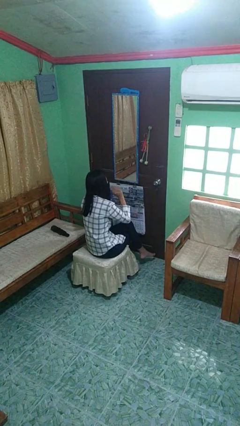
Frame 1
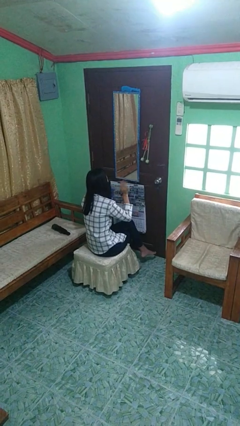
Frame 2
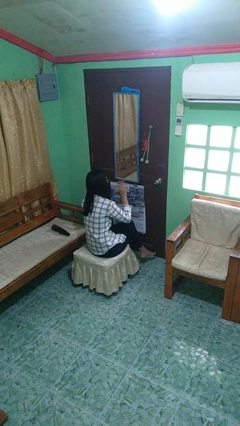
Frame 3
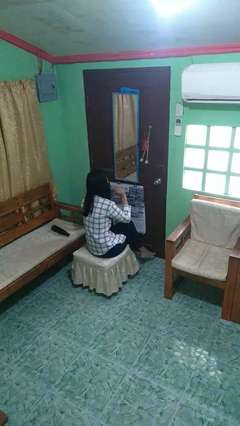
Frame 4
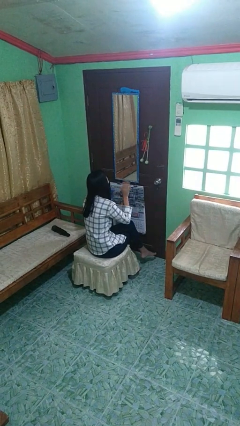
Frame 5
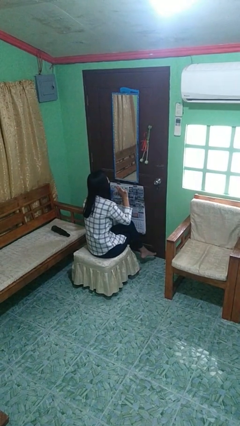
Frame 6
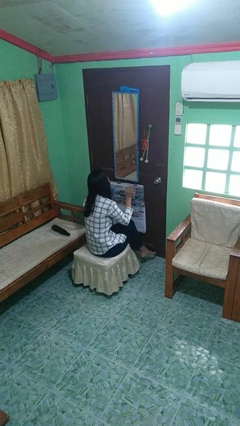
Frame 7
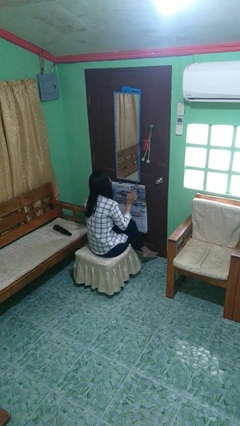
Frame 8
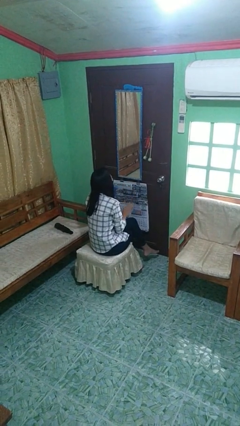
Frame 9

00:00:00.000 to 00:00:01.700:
person waves hand over object

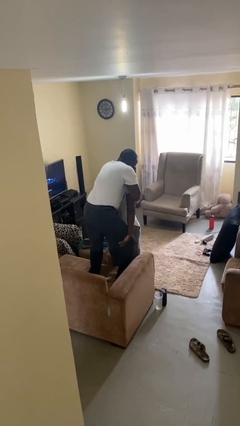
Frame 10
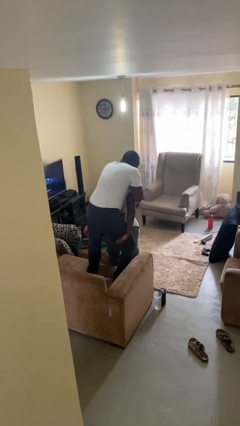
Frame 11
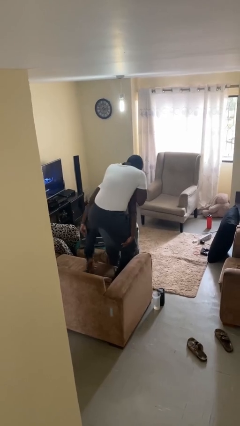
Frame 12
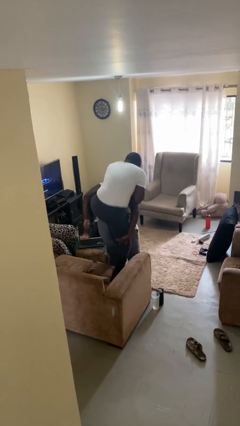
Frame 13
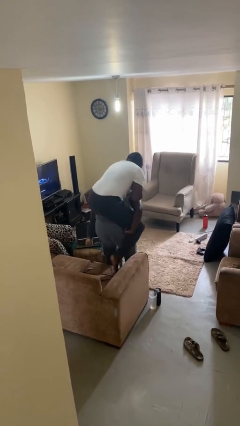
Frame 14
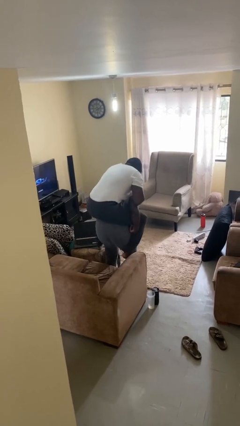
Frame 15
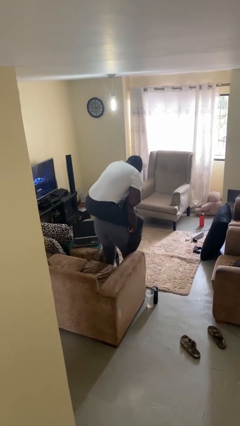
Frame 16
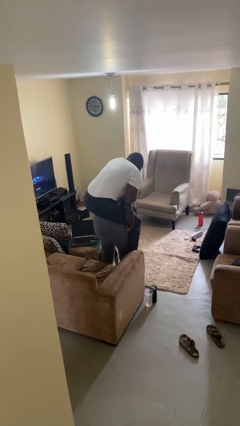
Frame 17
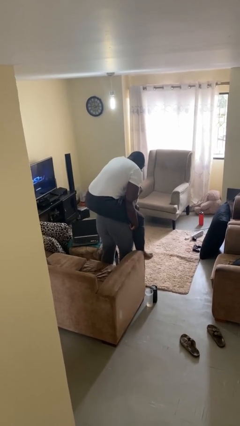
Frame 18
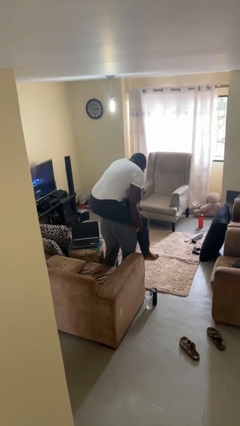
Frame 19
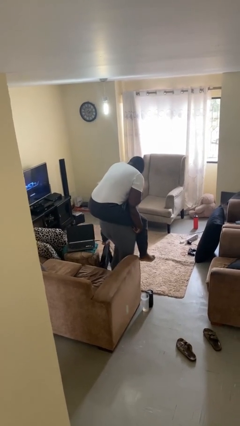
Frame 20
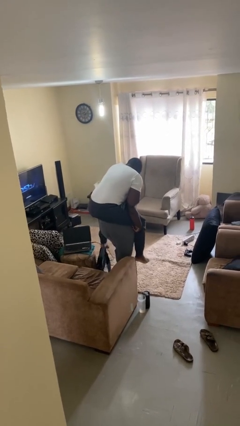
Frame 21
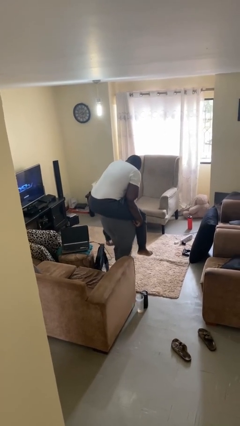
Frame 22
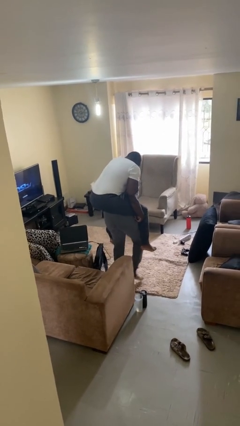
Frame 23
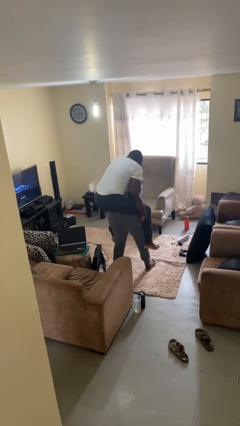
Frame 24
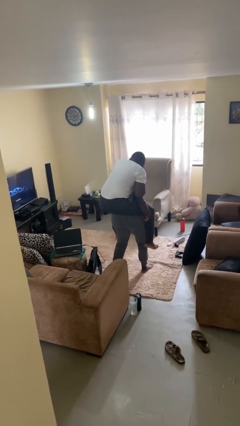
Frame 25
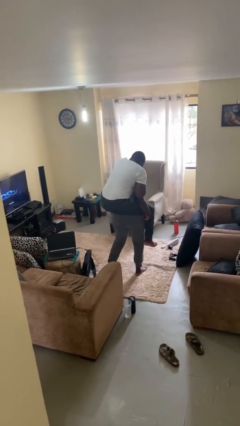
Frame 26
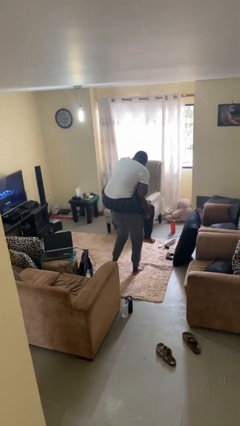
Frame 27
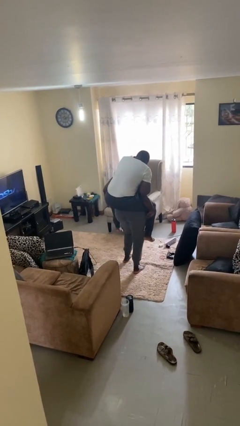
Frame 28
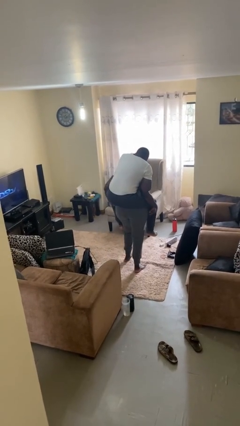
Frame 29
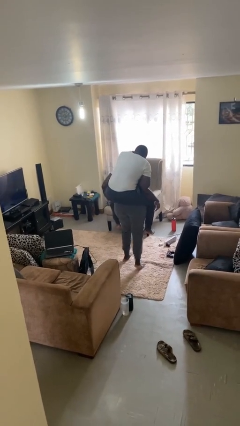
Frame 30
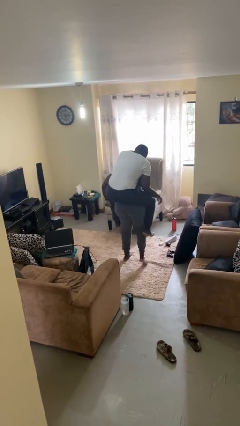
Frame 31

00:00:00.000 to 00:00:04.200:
person carries person on back

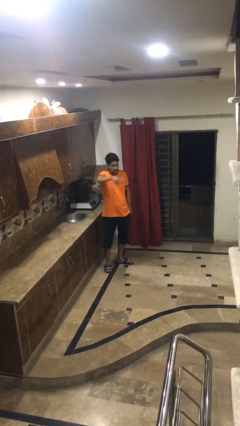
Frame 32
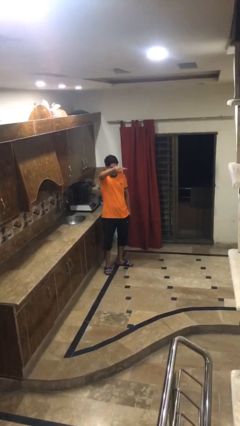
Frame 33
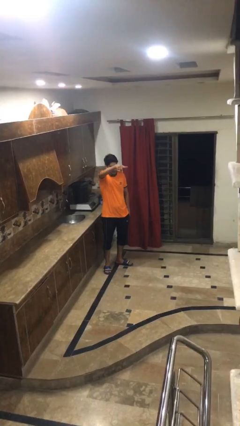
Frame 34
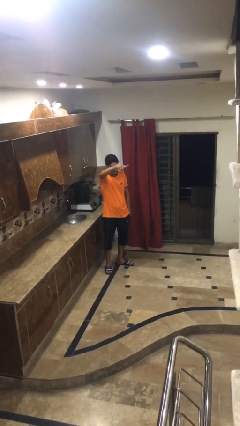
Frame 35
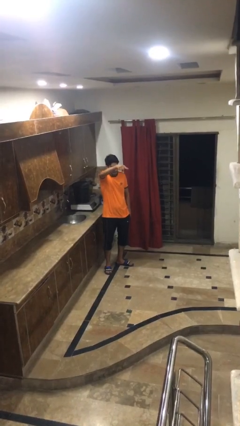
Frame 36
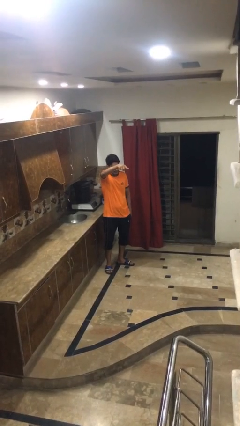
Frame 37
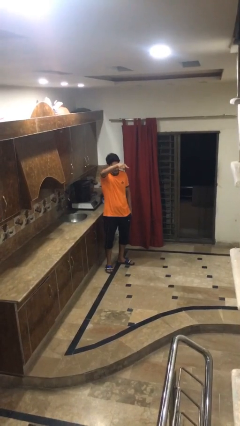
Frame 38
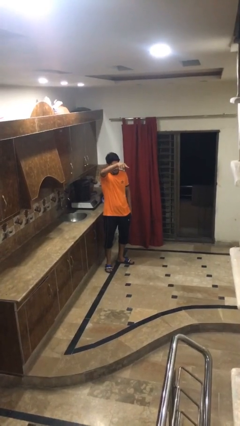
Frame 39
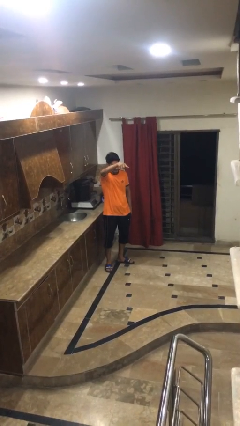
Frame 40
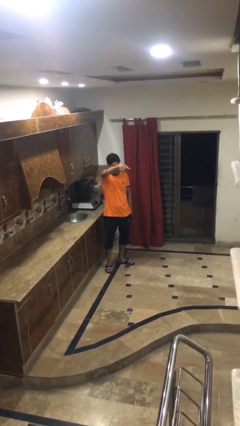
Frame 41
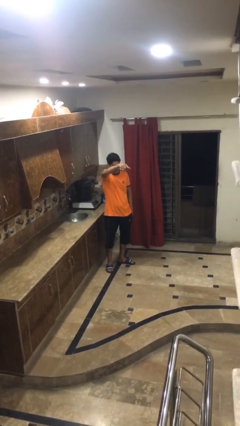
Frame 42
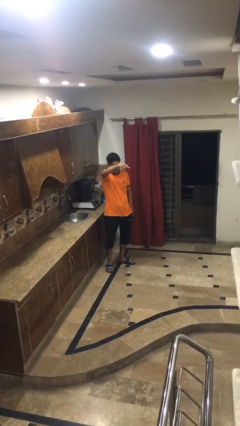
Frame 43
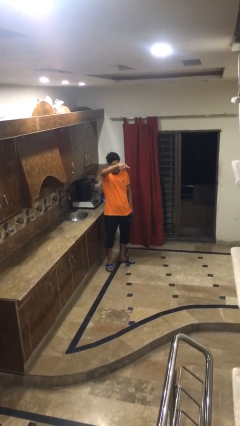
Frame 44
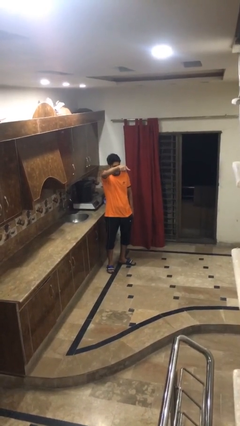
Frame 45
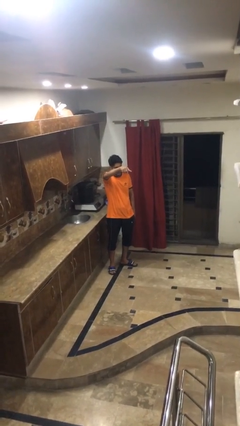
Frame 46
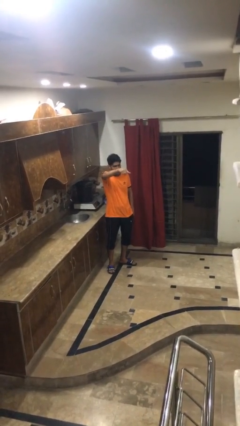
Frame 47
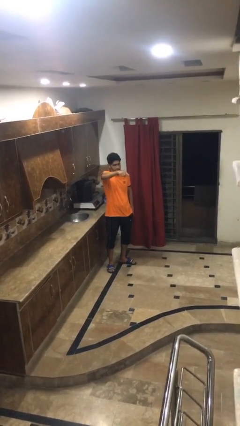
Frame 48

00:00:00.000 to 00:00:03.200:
person points at person

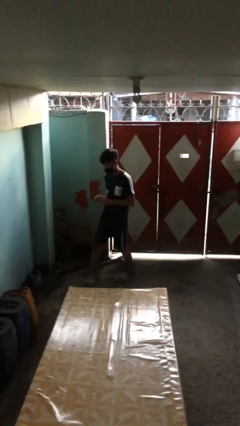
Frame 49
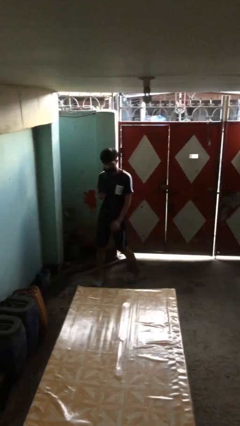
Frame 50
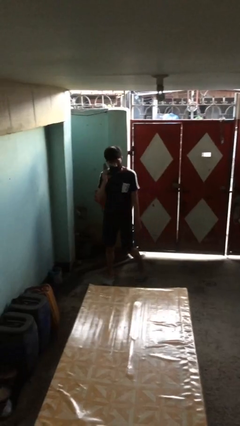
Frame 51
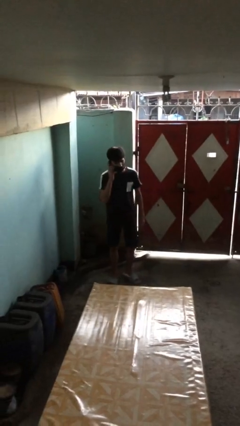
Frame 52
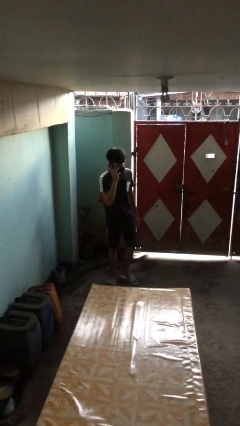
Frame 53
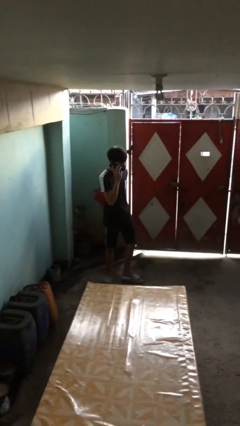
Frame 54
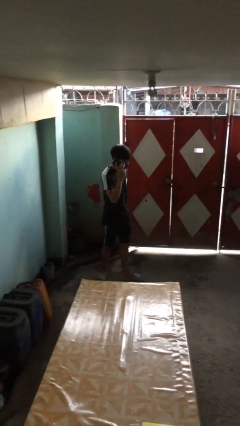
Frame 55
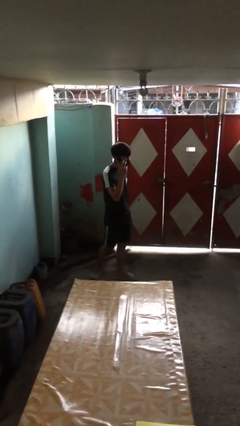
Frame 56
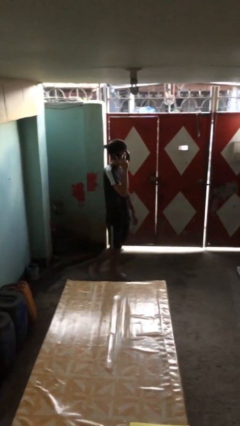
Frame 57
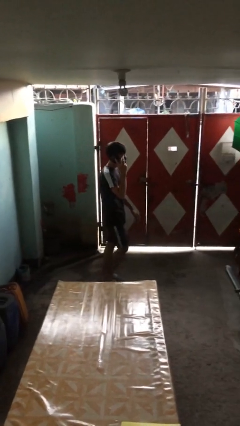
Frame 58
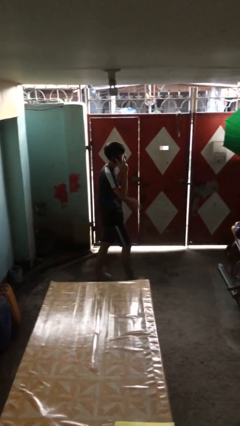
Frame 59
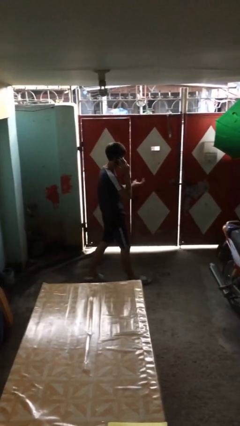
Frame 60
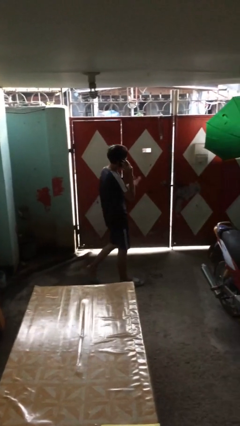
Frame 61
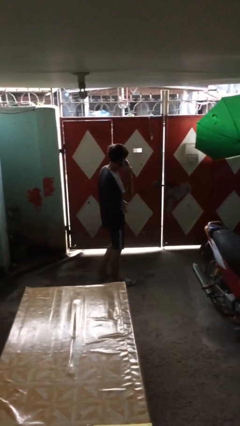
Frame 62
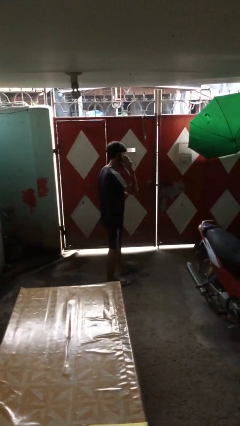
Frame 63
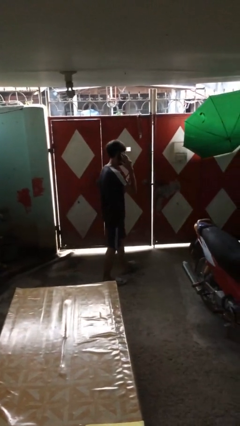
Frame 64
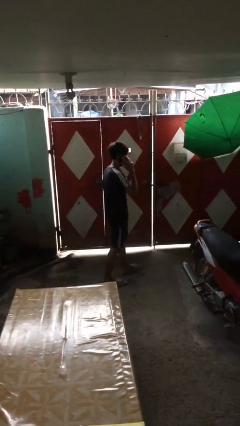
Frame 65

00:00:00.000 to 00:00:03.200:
person talks on phone

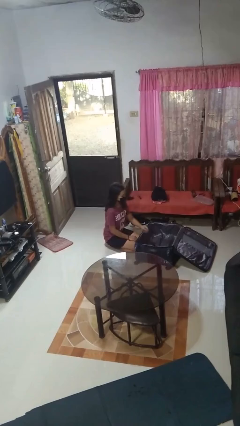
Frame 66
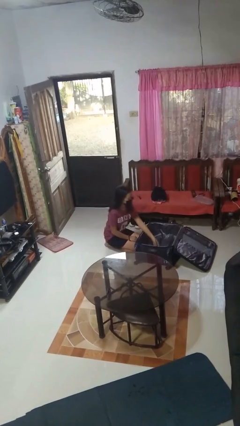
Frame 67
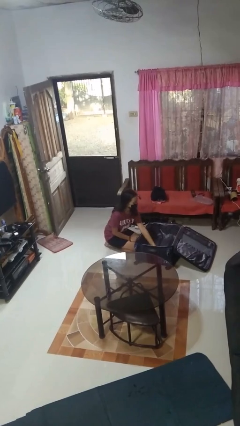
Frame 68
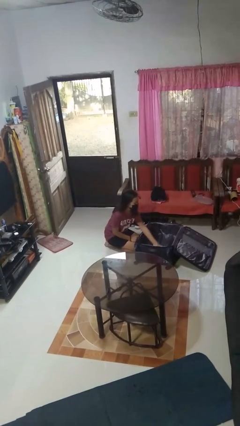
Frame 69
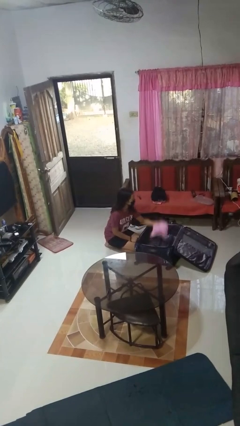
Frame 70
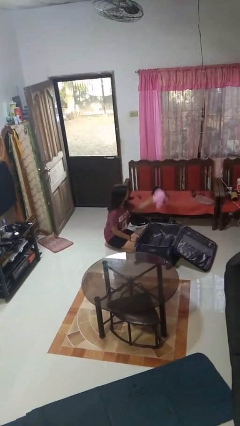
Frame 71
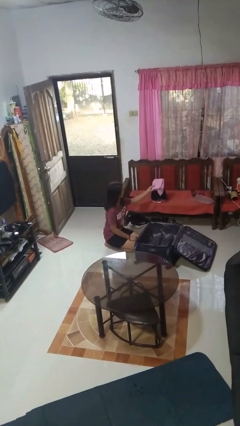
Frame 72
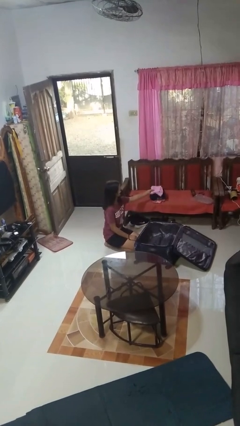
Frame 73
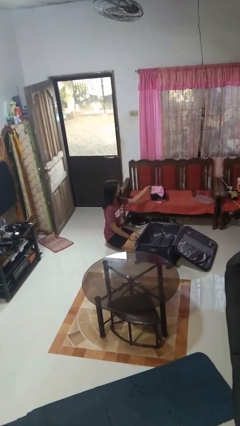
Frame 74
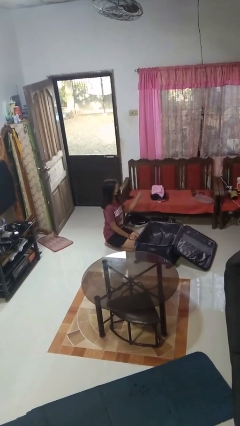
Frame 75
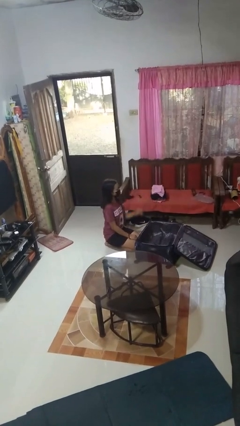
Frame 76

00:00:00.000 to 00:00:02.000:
person unloads clothes from suitcase

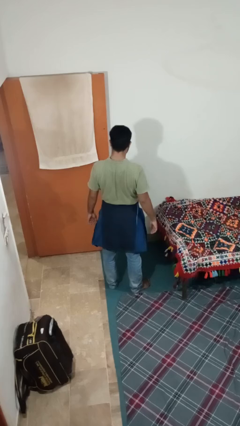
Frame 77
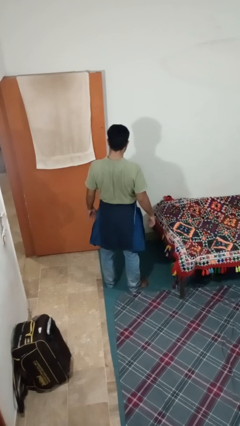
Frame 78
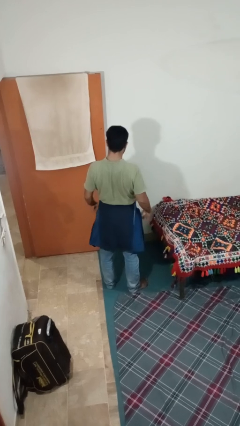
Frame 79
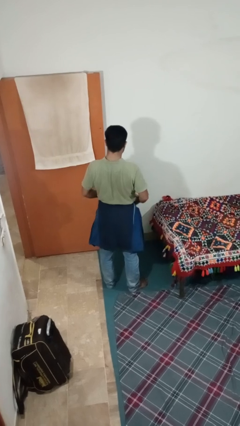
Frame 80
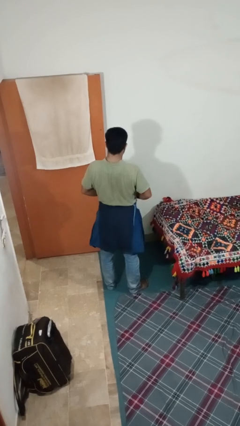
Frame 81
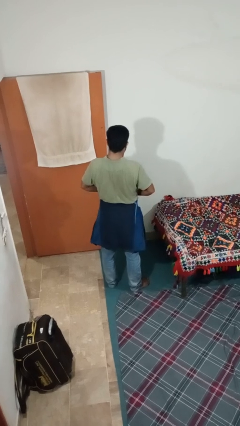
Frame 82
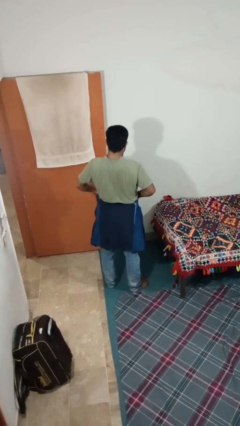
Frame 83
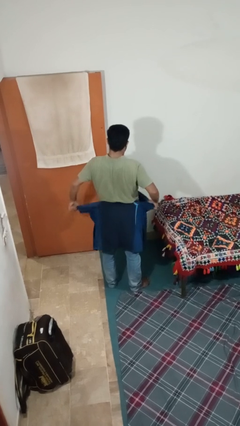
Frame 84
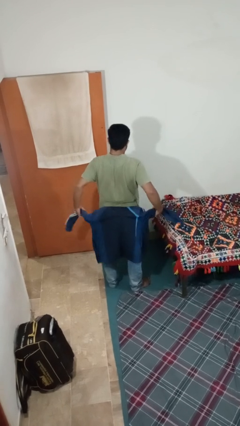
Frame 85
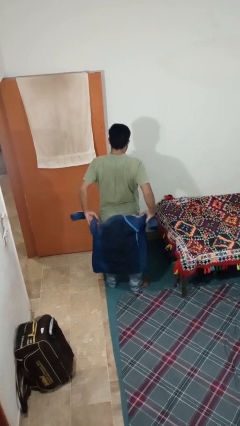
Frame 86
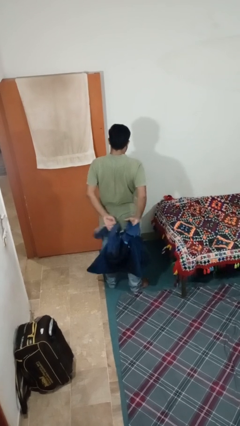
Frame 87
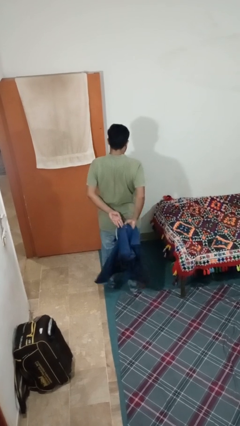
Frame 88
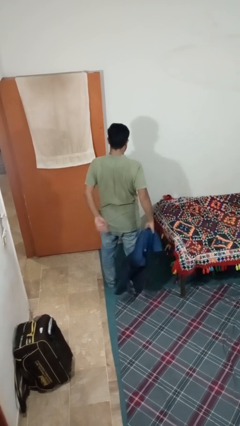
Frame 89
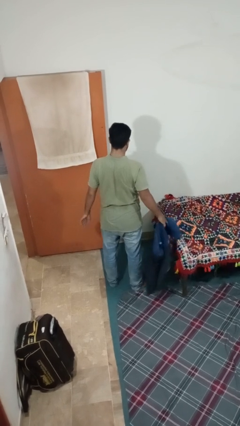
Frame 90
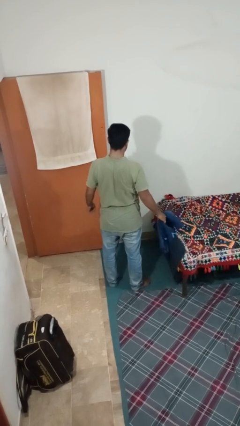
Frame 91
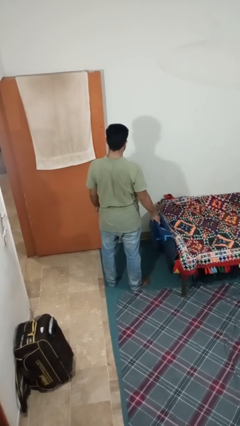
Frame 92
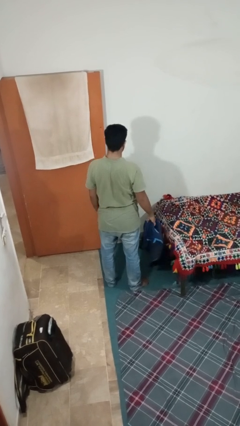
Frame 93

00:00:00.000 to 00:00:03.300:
person unties jacket around waist

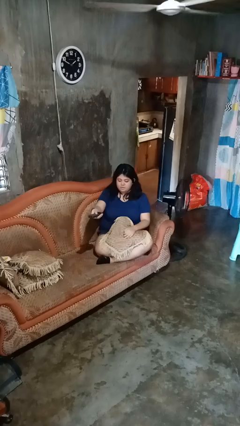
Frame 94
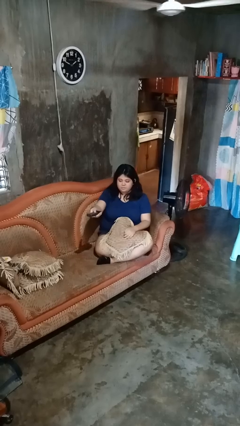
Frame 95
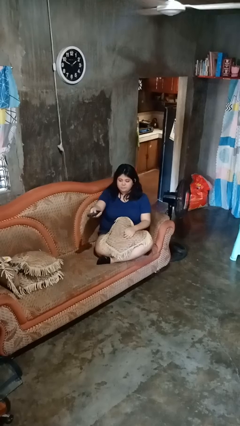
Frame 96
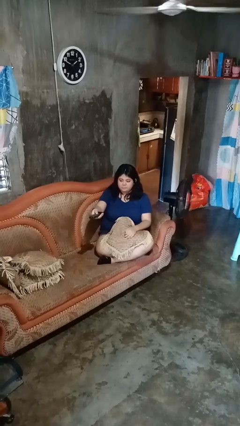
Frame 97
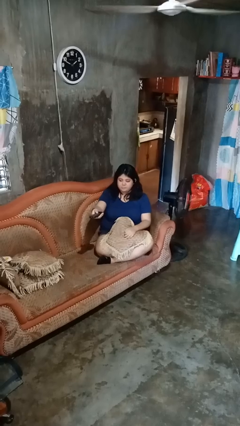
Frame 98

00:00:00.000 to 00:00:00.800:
person uses television remote
